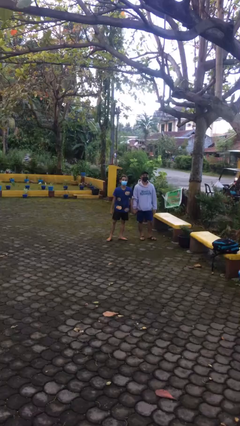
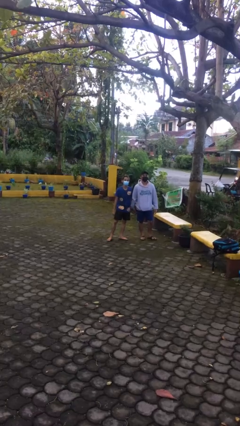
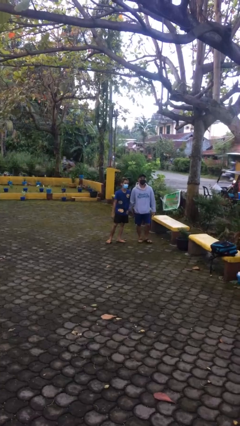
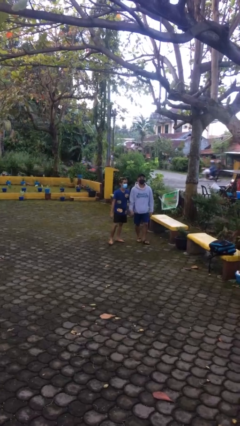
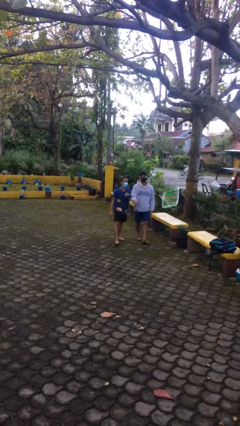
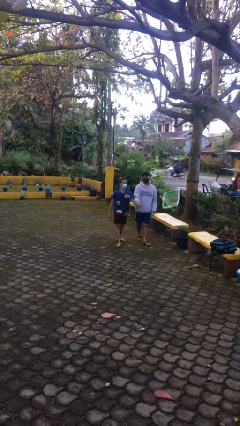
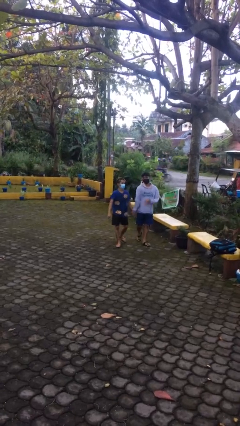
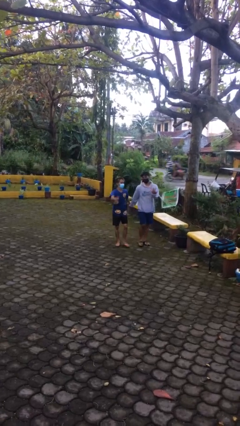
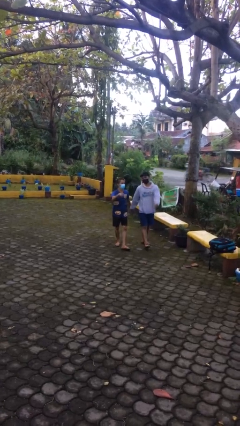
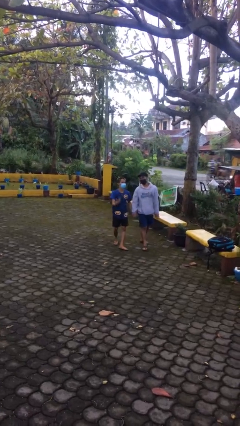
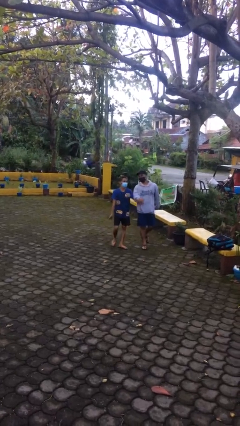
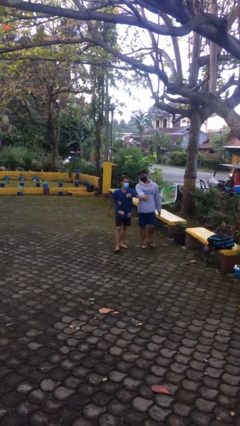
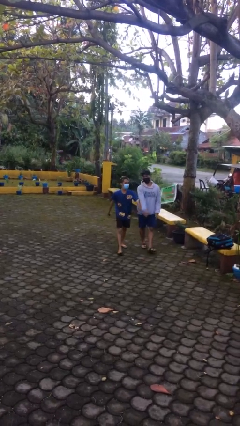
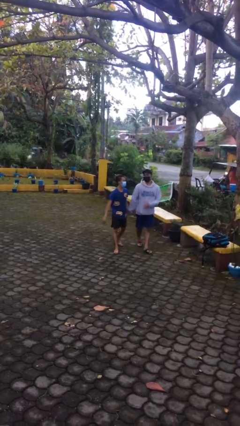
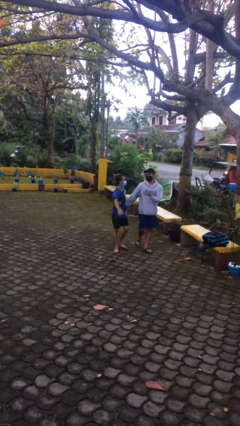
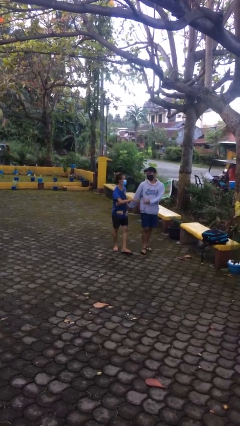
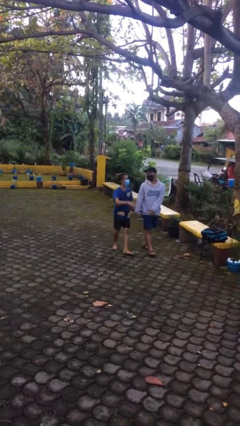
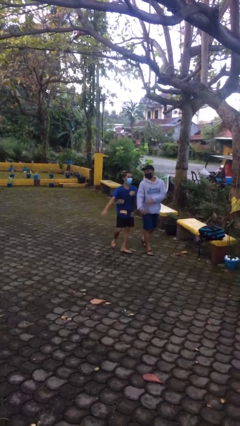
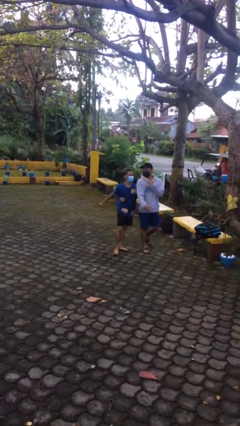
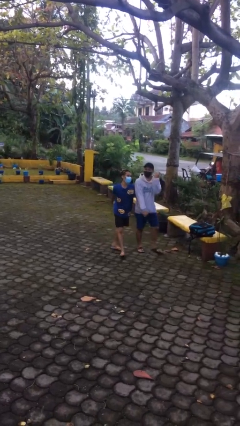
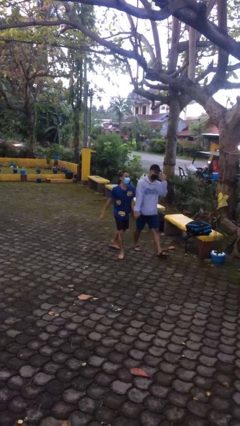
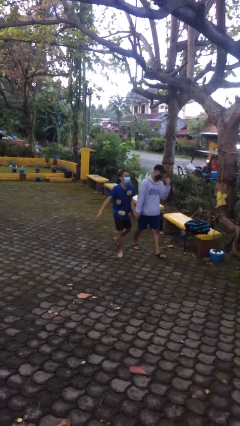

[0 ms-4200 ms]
person holds hand

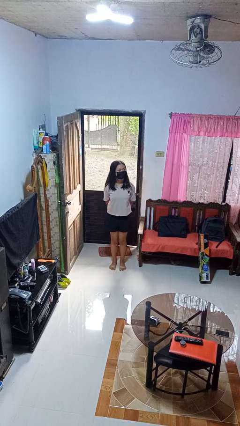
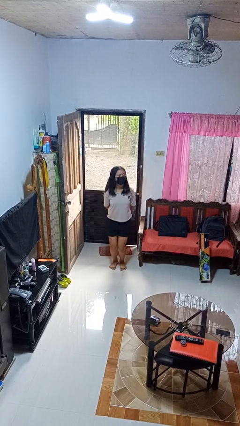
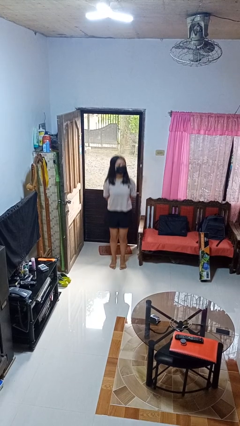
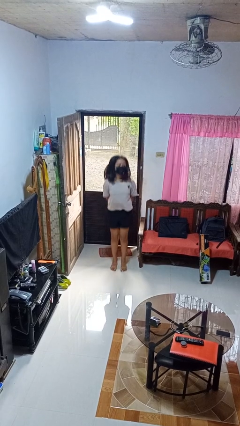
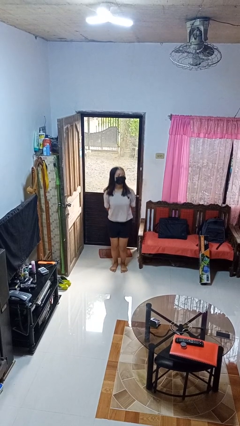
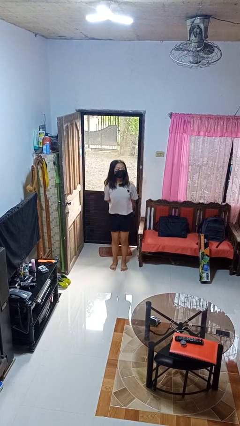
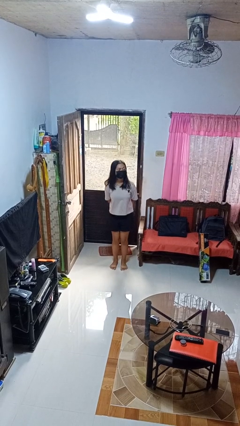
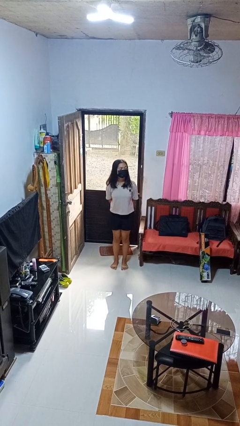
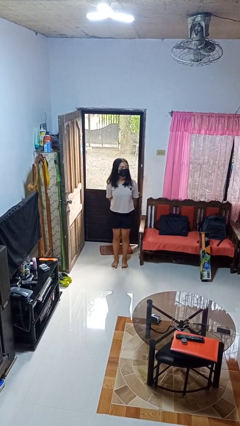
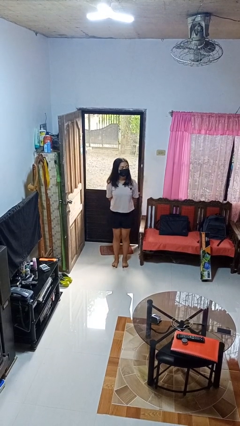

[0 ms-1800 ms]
person jumps

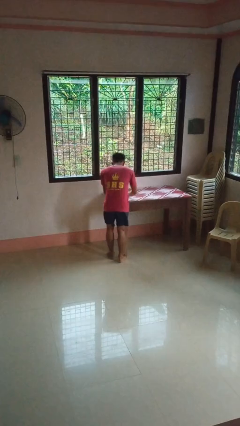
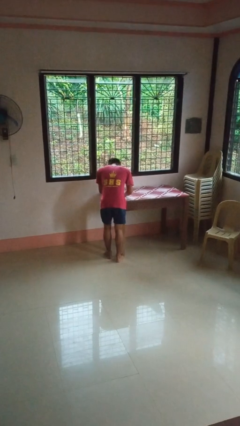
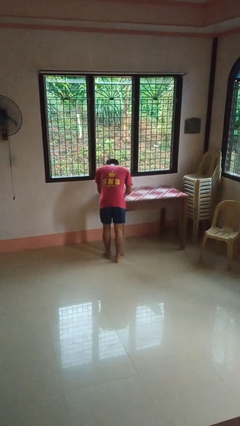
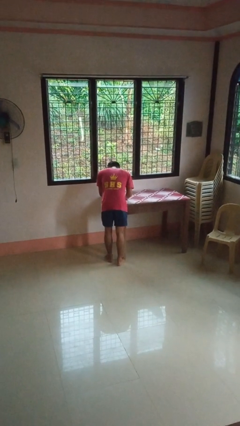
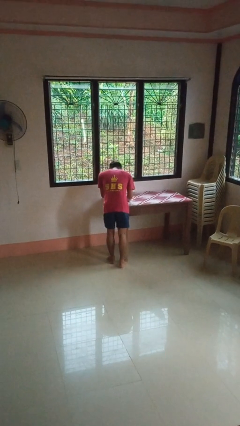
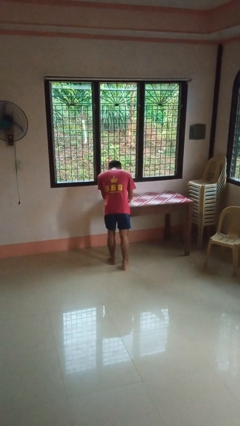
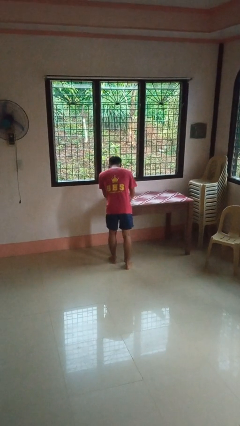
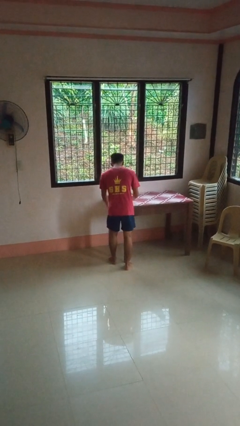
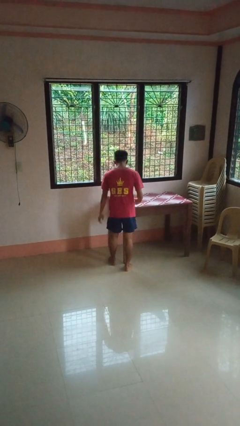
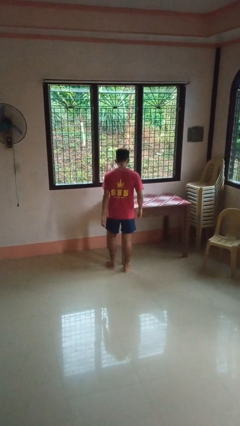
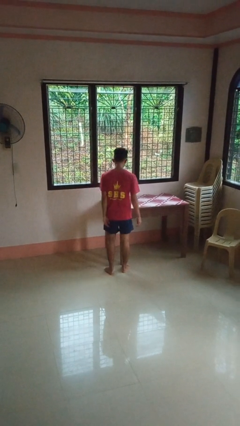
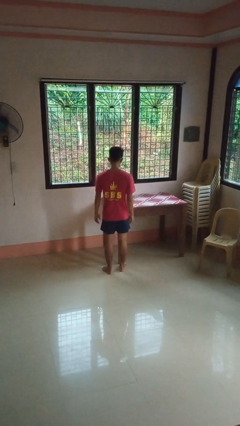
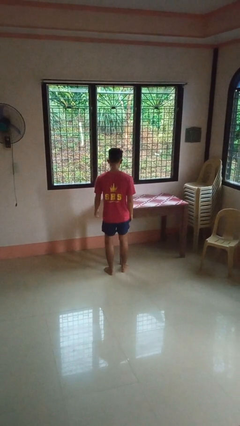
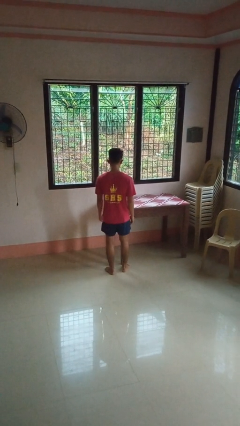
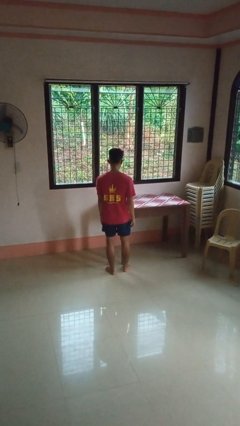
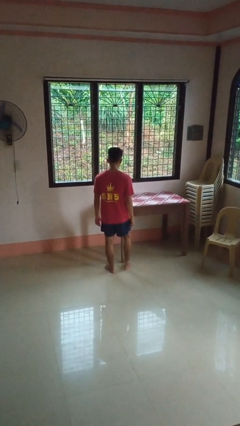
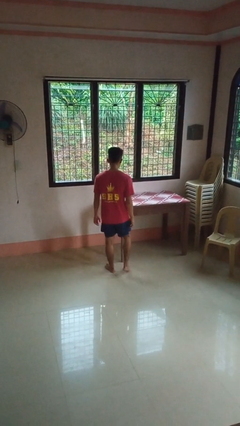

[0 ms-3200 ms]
person bumps into table

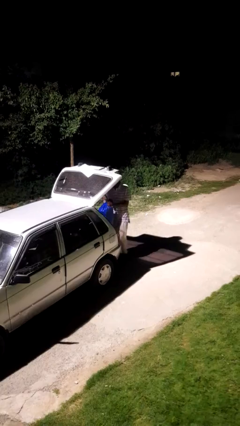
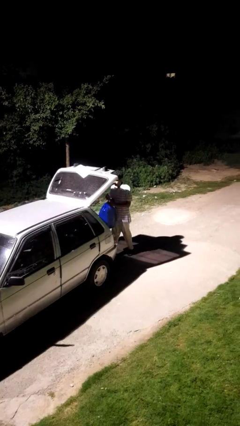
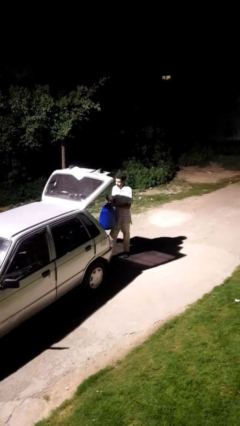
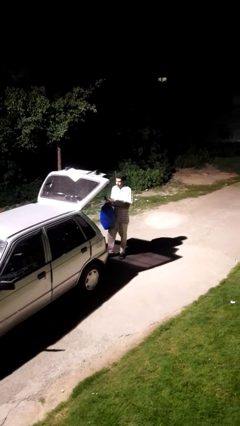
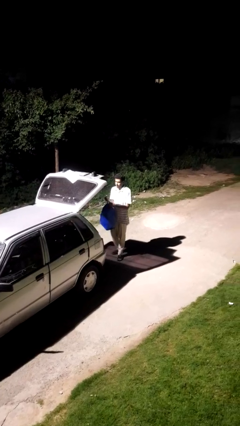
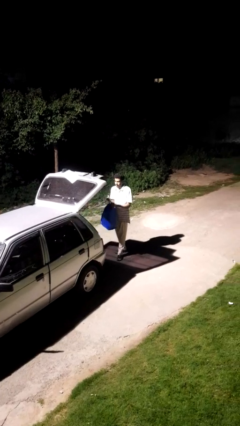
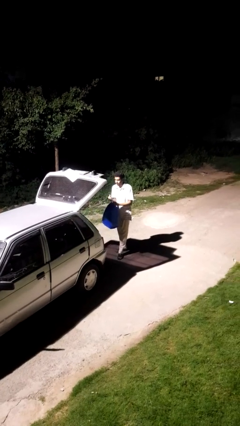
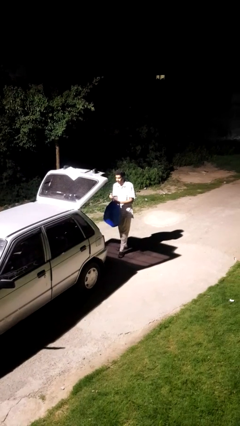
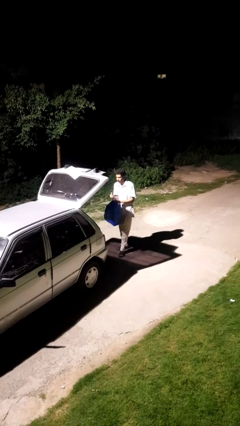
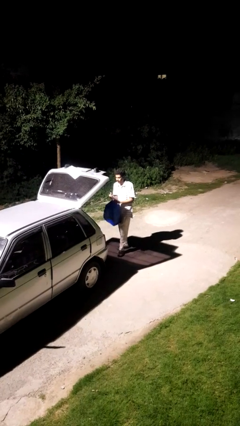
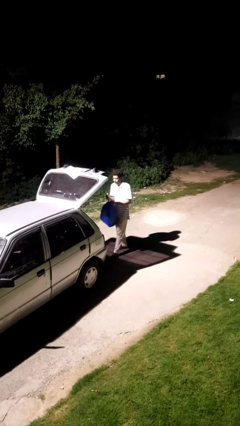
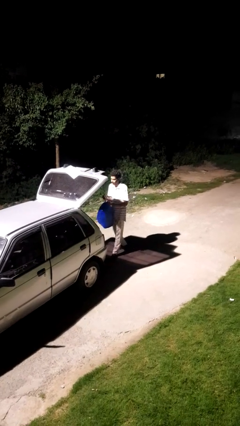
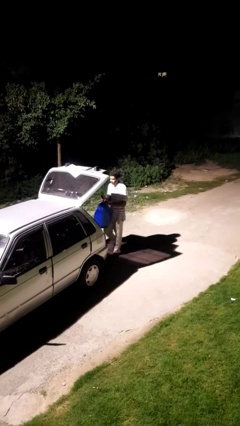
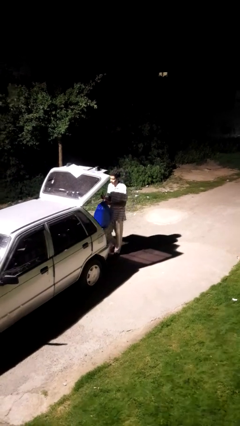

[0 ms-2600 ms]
person unloads car

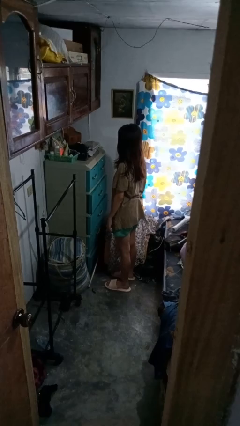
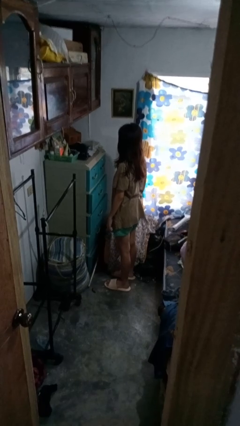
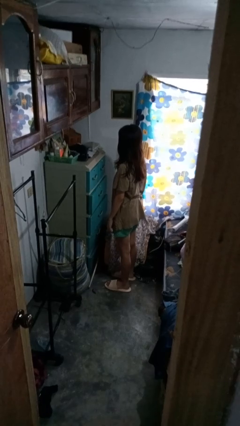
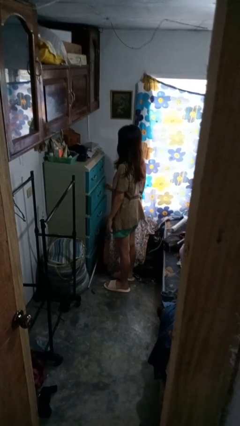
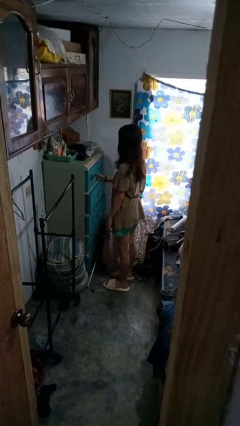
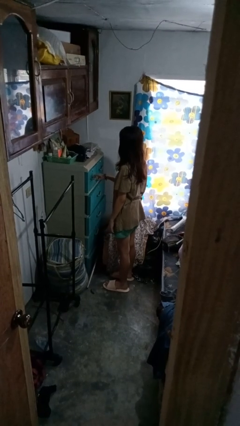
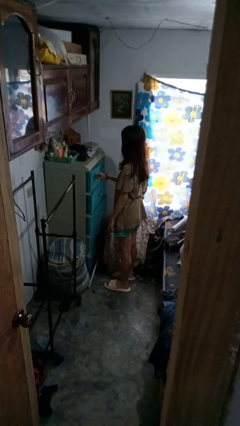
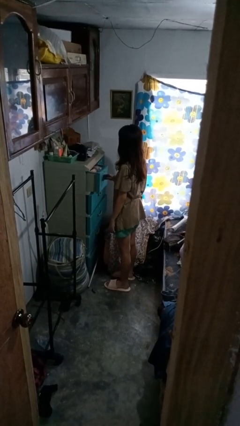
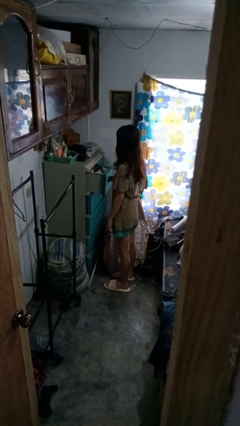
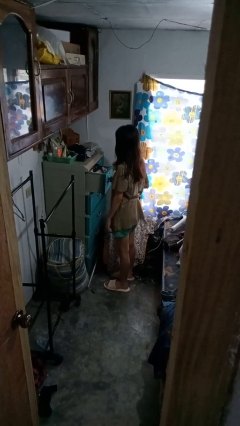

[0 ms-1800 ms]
person opens dresser drawer

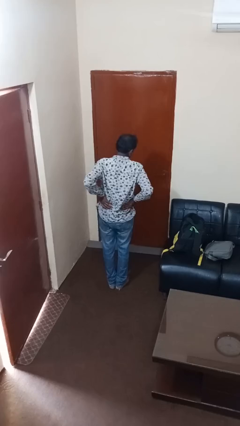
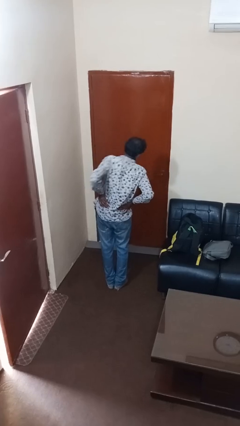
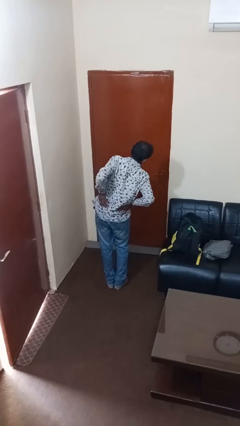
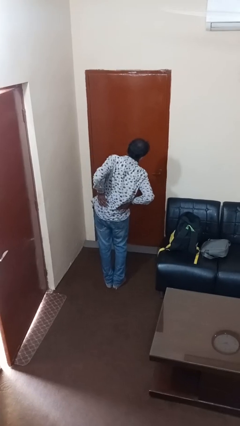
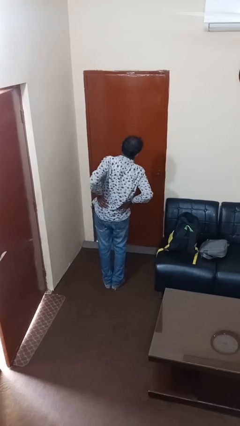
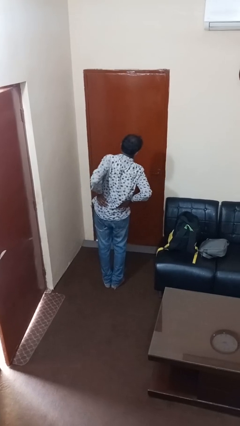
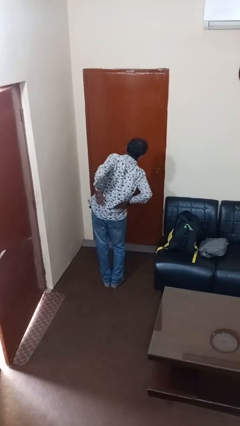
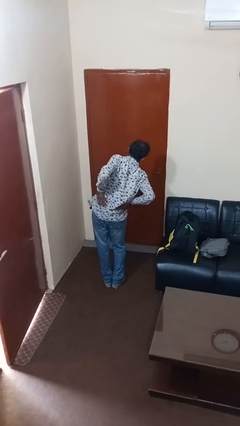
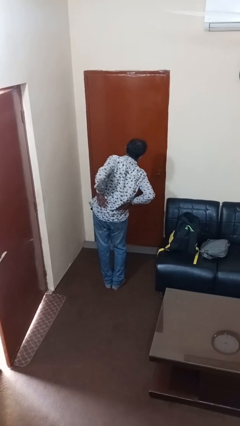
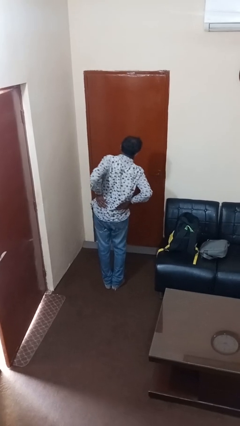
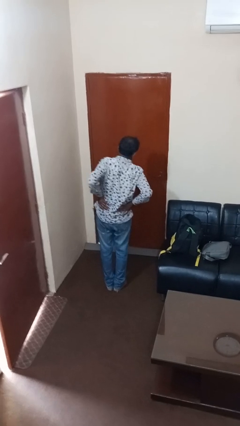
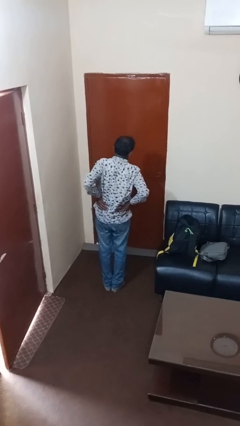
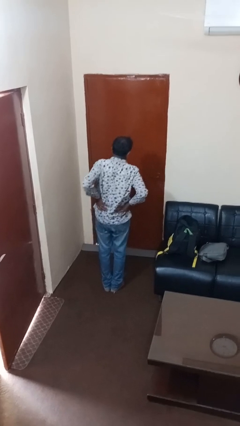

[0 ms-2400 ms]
person stretches arms to side

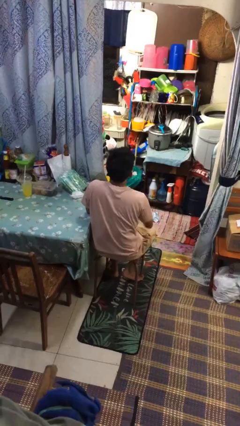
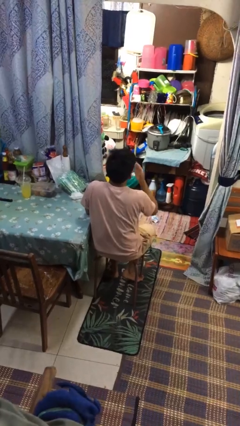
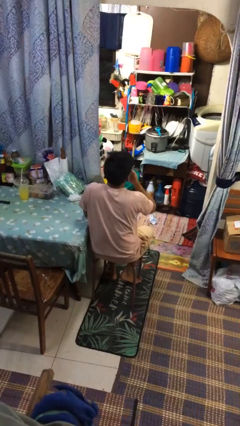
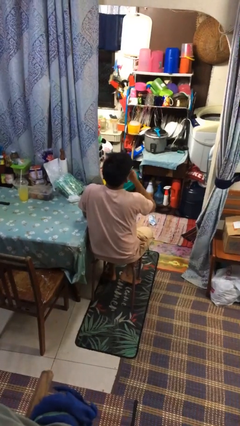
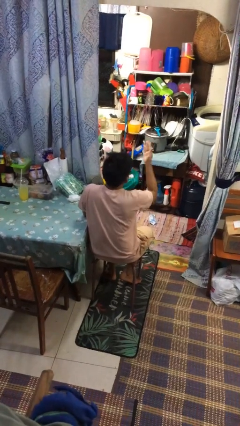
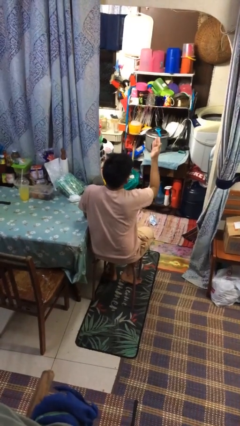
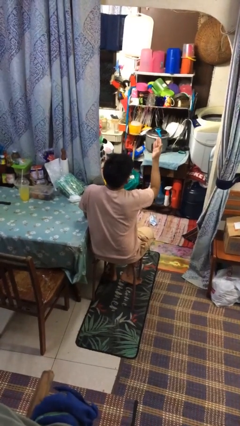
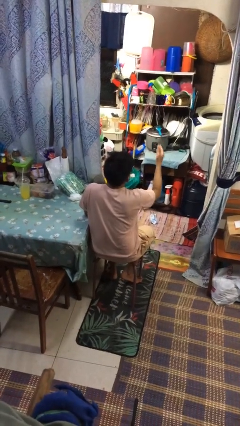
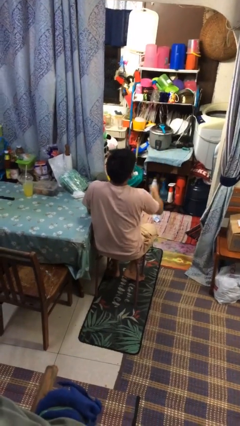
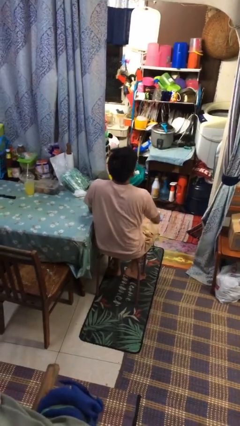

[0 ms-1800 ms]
person gestures blow kiss
